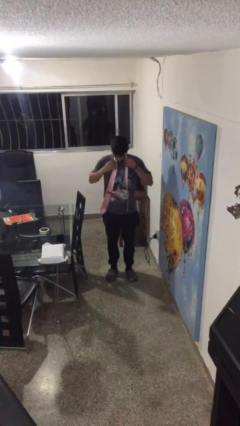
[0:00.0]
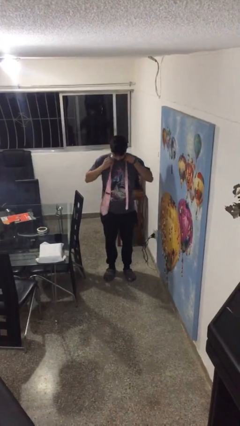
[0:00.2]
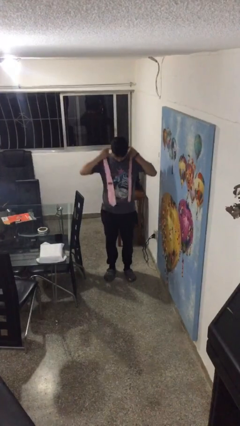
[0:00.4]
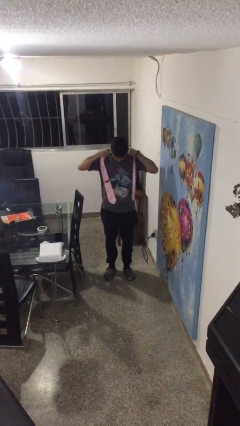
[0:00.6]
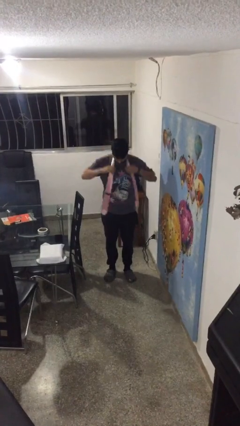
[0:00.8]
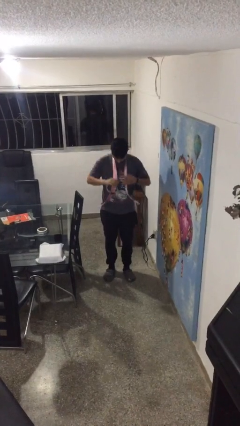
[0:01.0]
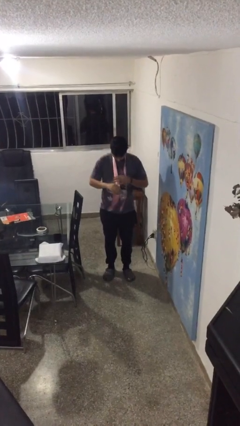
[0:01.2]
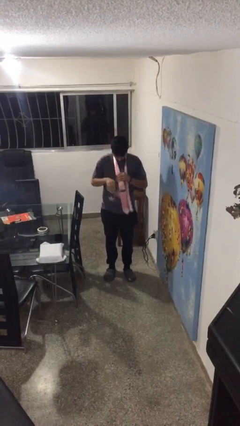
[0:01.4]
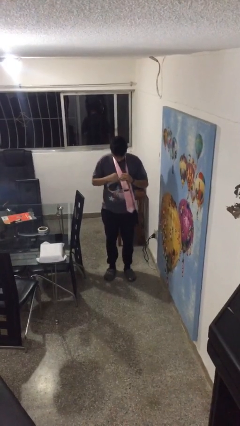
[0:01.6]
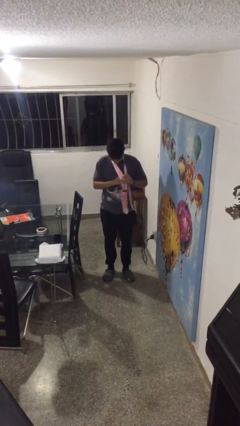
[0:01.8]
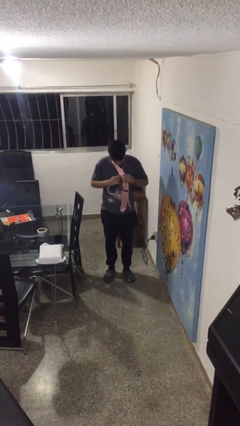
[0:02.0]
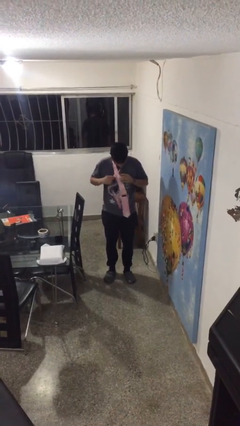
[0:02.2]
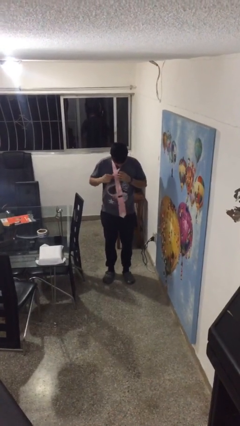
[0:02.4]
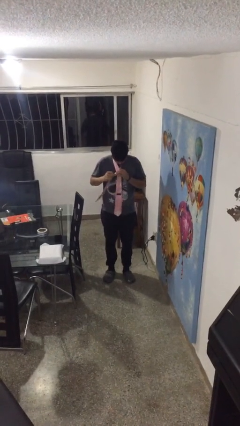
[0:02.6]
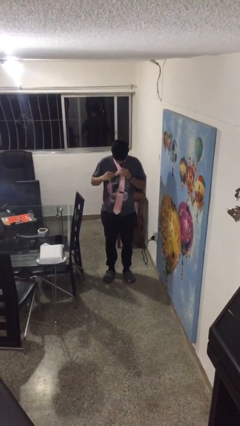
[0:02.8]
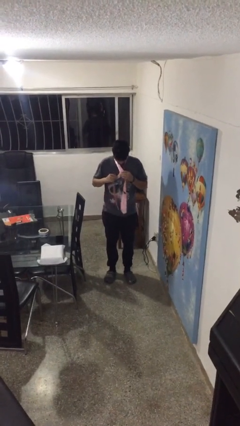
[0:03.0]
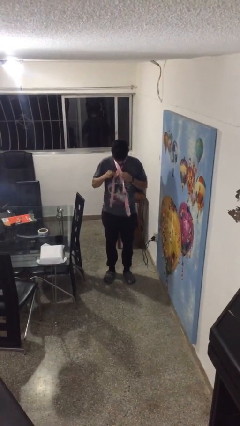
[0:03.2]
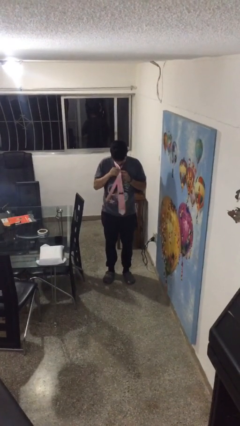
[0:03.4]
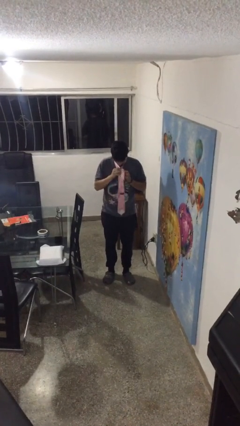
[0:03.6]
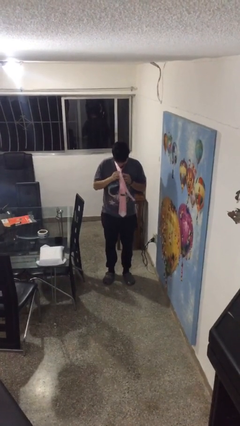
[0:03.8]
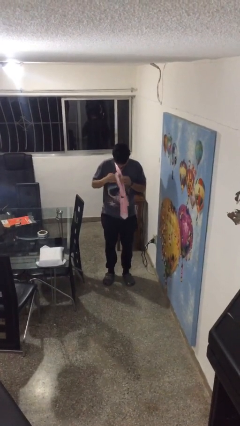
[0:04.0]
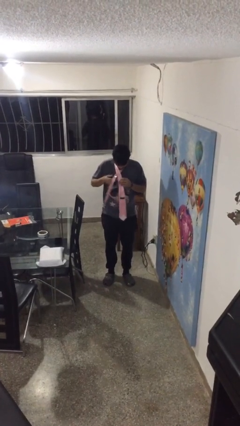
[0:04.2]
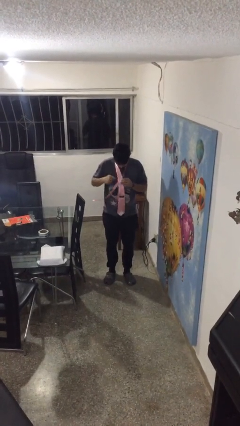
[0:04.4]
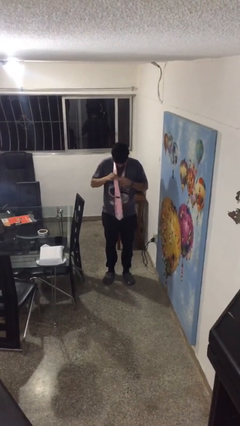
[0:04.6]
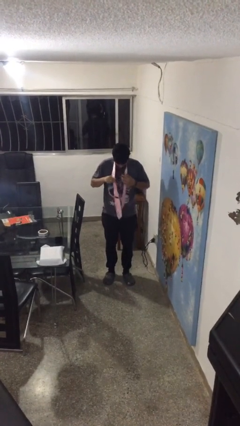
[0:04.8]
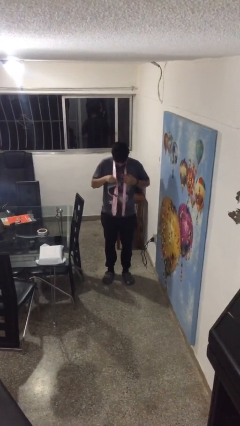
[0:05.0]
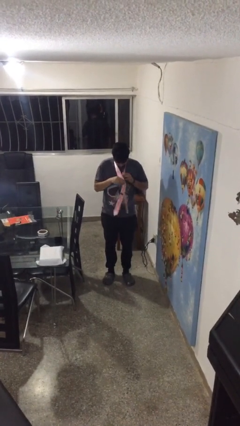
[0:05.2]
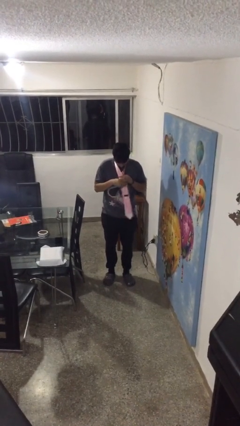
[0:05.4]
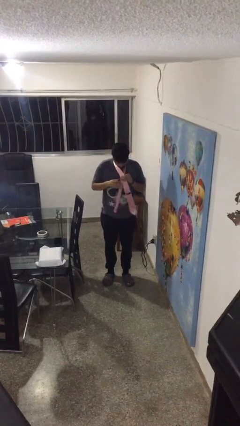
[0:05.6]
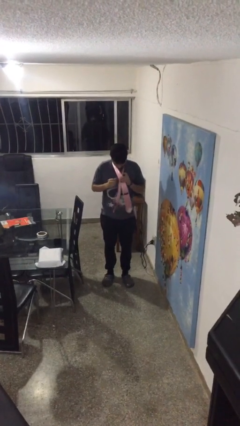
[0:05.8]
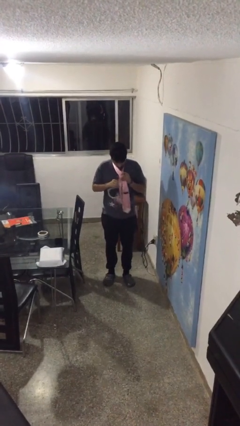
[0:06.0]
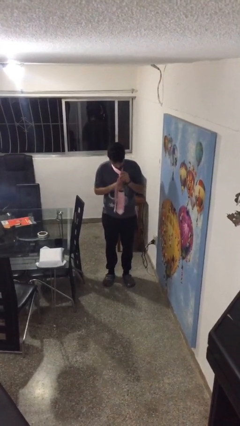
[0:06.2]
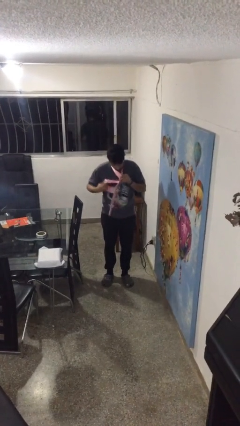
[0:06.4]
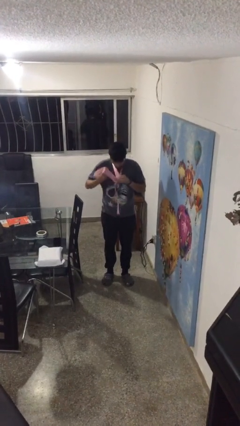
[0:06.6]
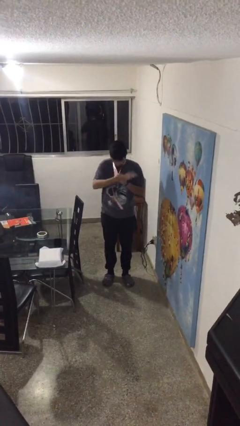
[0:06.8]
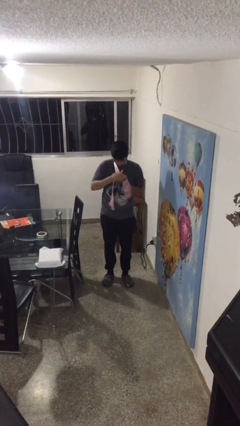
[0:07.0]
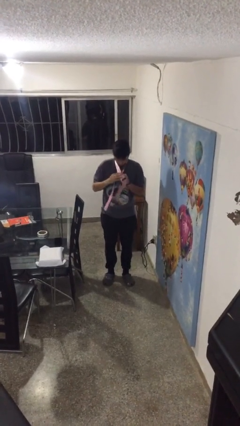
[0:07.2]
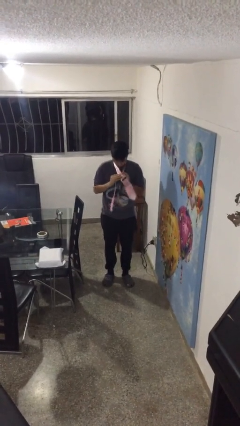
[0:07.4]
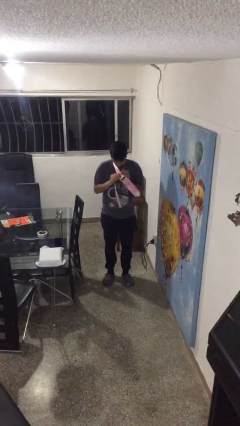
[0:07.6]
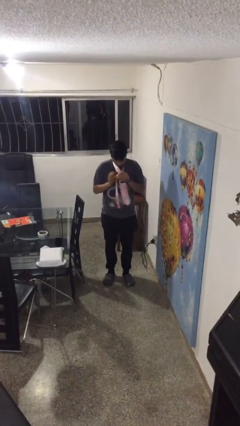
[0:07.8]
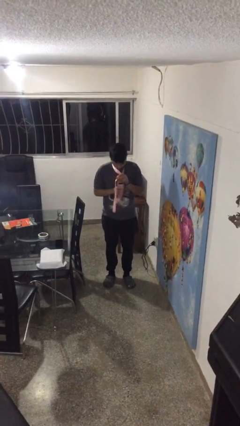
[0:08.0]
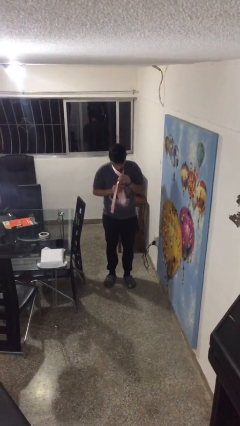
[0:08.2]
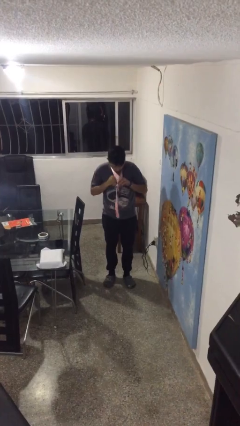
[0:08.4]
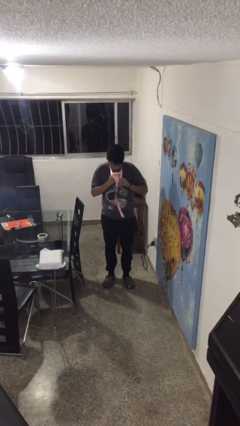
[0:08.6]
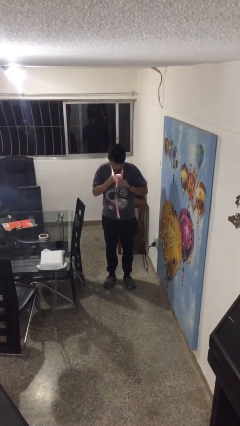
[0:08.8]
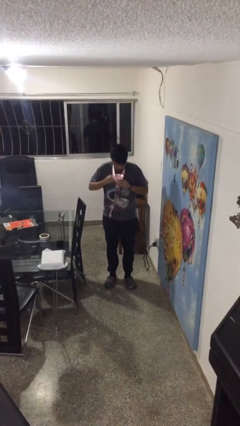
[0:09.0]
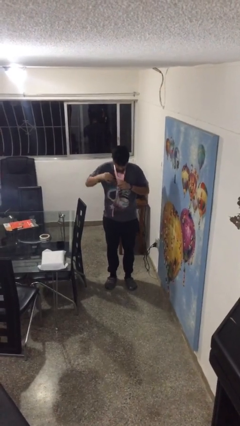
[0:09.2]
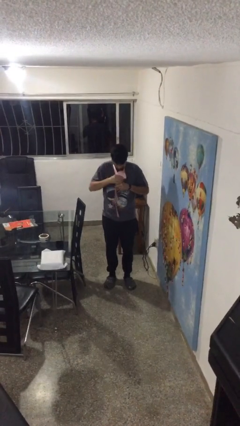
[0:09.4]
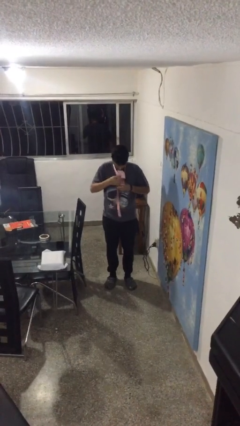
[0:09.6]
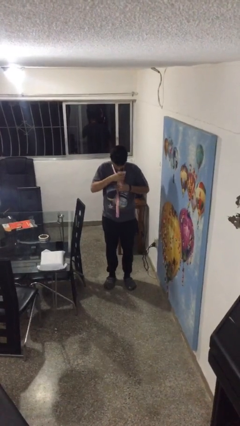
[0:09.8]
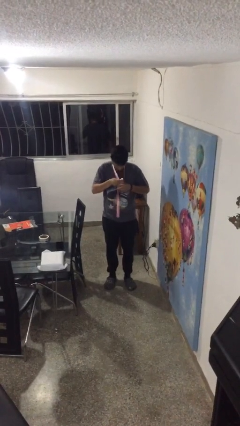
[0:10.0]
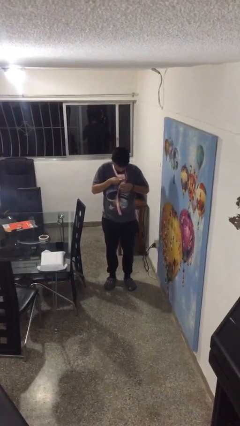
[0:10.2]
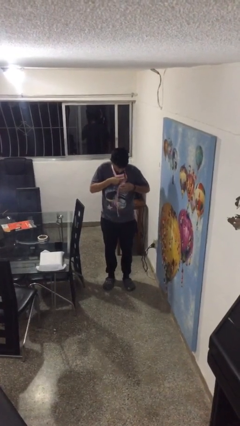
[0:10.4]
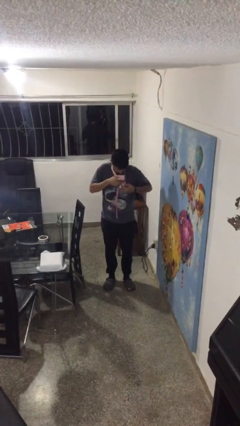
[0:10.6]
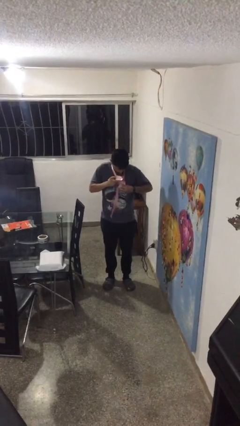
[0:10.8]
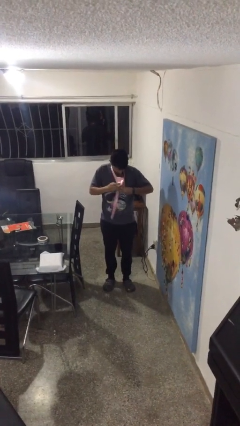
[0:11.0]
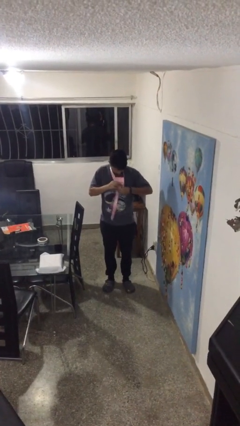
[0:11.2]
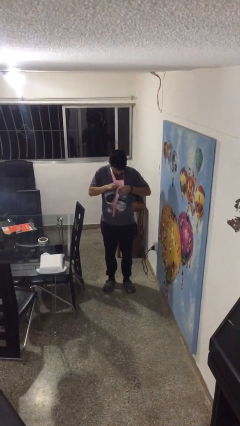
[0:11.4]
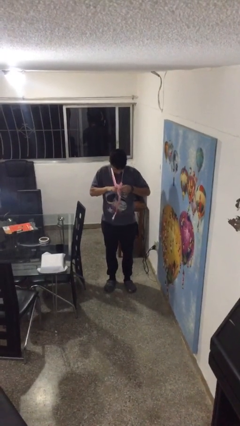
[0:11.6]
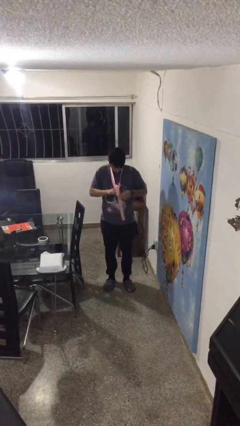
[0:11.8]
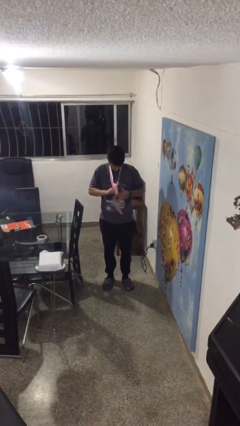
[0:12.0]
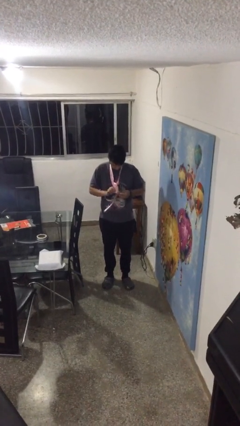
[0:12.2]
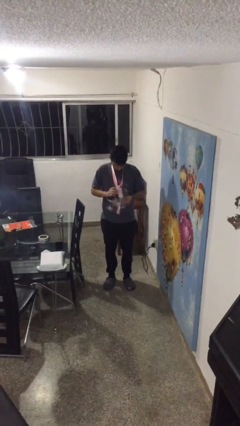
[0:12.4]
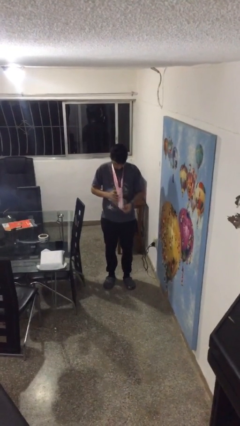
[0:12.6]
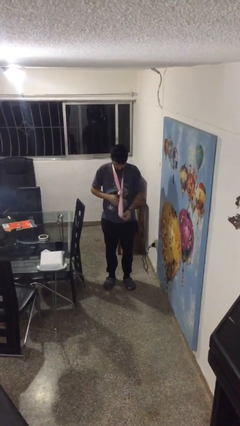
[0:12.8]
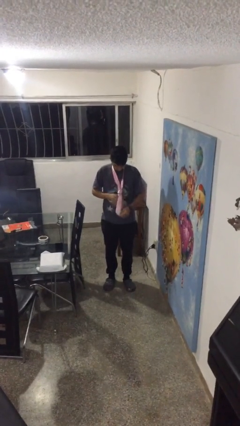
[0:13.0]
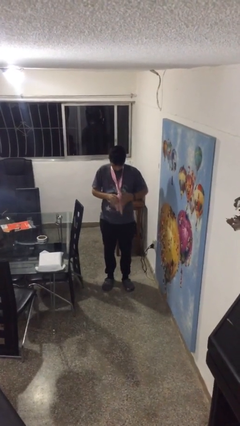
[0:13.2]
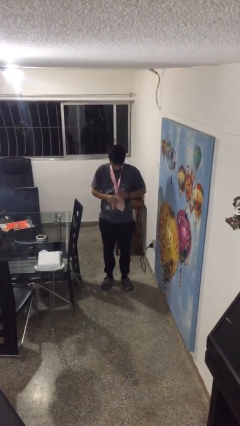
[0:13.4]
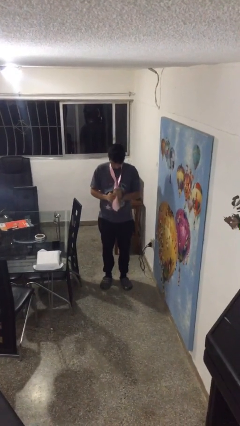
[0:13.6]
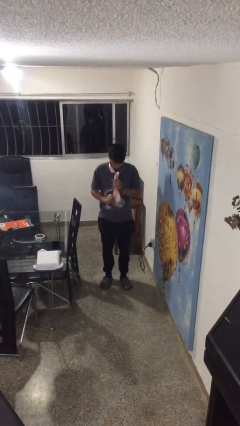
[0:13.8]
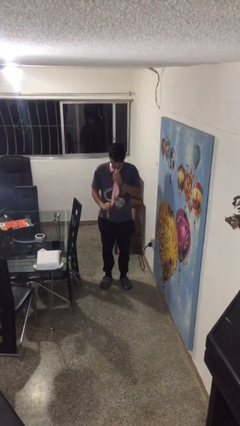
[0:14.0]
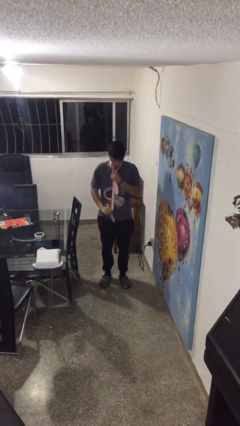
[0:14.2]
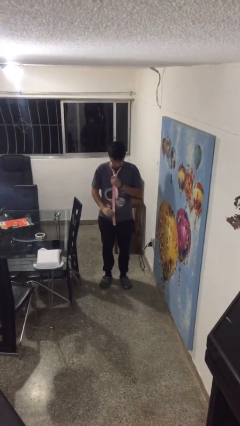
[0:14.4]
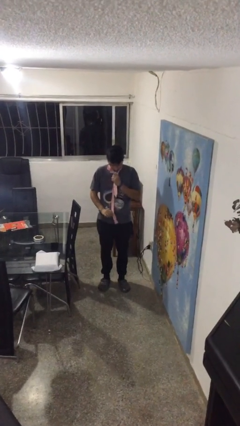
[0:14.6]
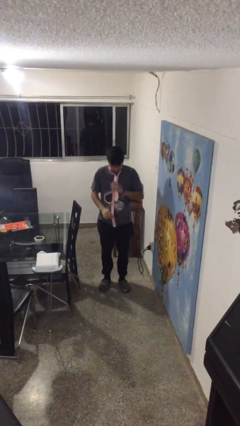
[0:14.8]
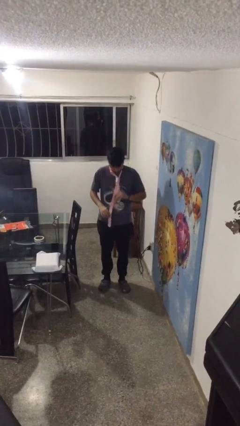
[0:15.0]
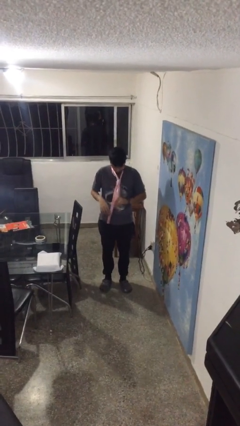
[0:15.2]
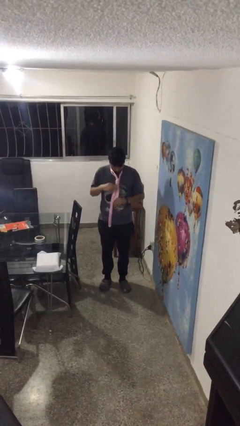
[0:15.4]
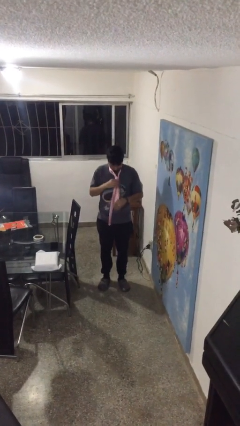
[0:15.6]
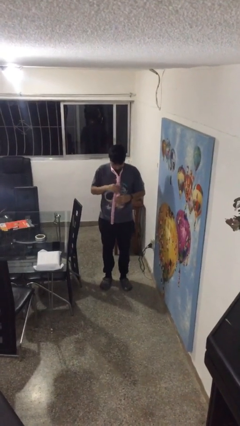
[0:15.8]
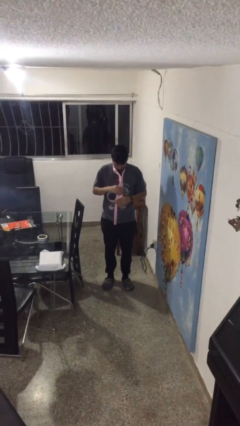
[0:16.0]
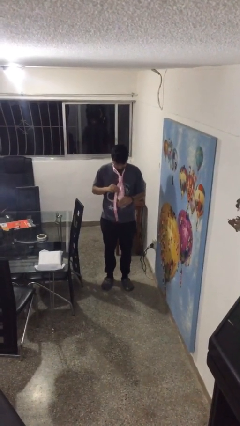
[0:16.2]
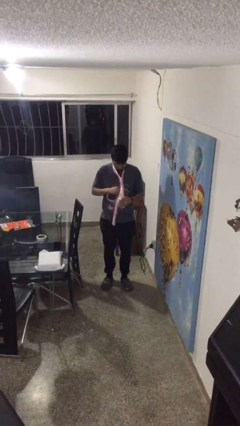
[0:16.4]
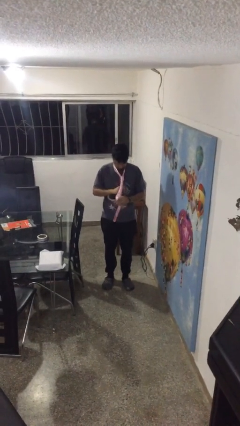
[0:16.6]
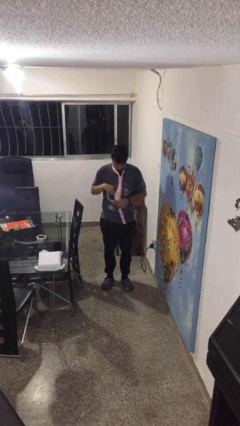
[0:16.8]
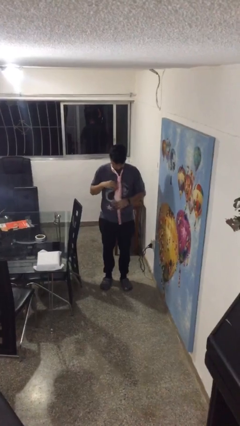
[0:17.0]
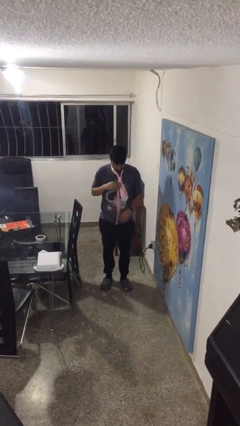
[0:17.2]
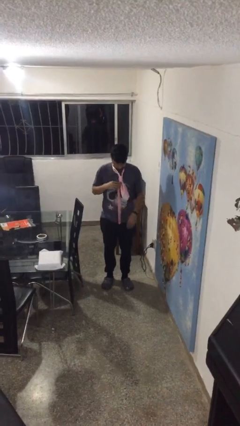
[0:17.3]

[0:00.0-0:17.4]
person puts on necktie

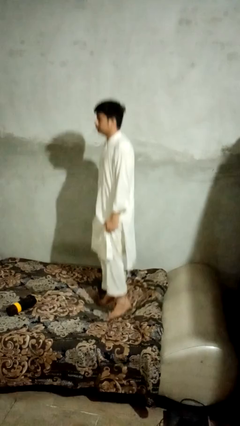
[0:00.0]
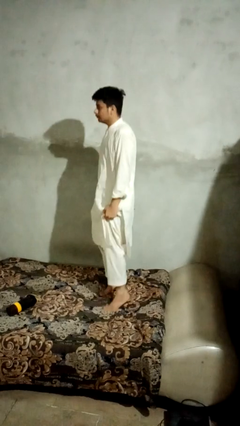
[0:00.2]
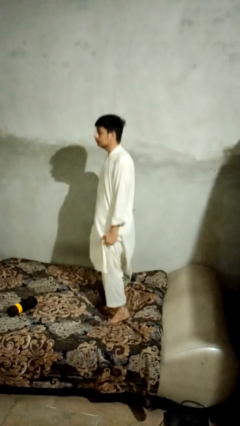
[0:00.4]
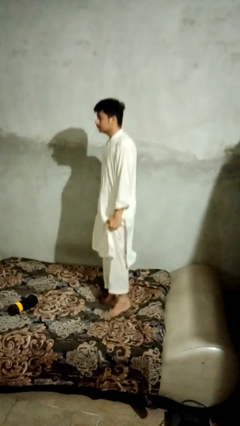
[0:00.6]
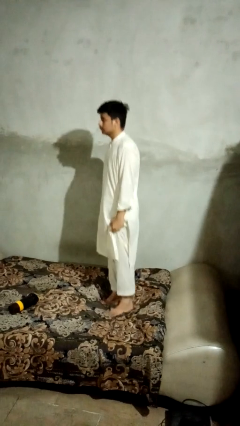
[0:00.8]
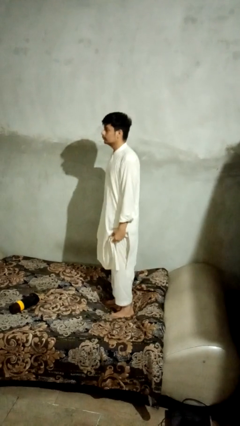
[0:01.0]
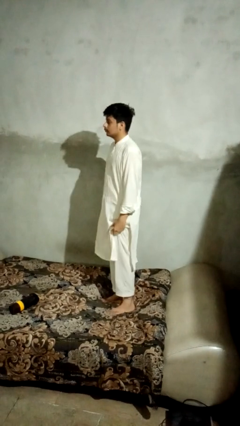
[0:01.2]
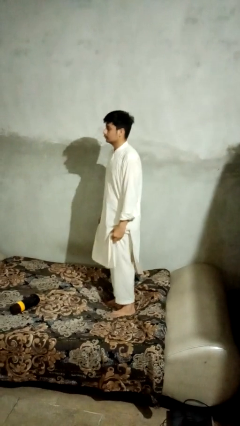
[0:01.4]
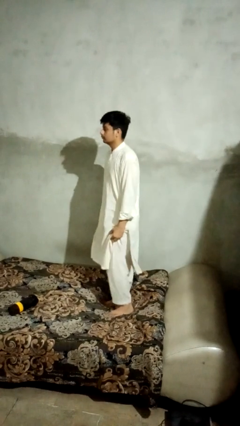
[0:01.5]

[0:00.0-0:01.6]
person jumps on bed
